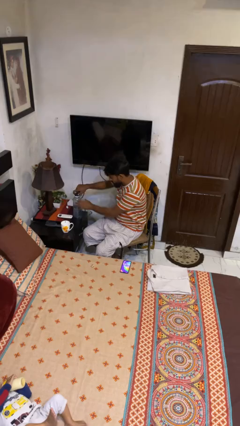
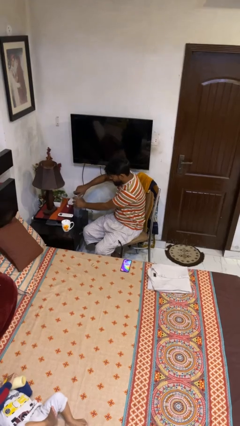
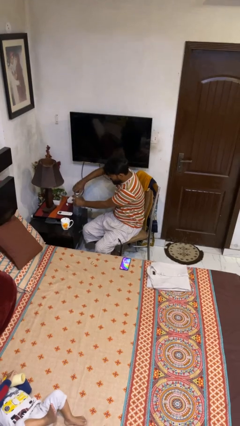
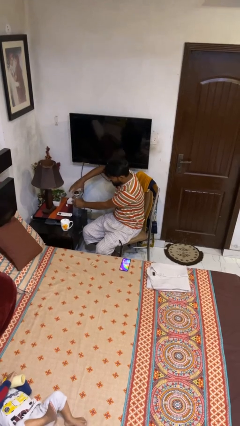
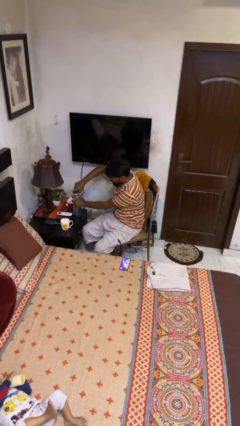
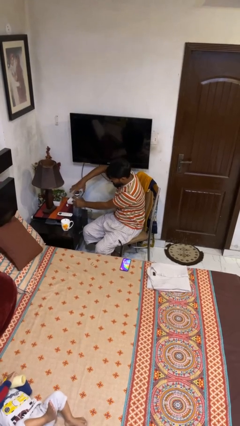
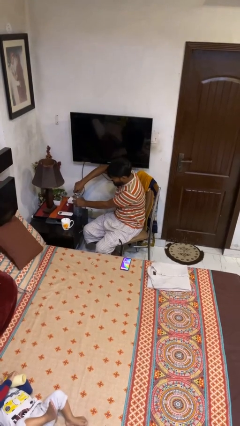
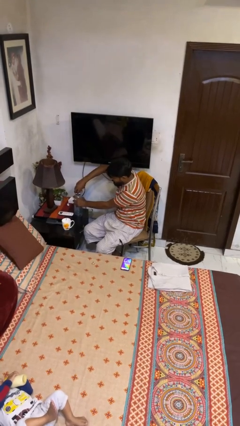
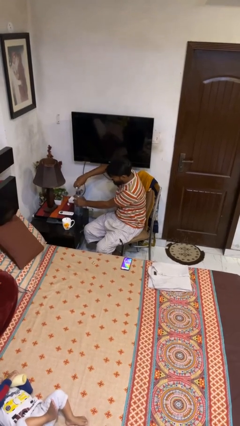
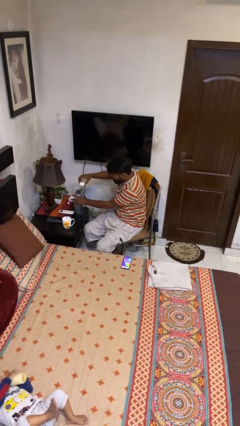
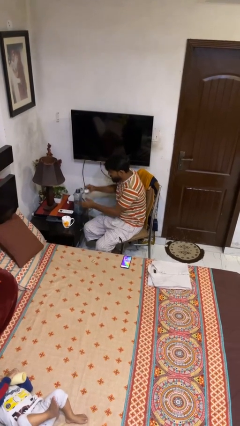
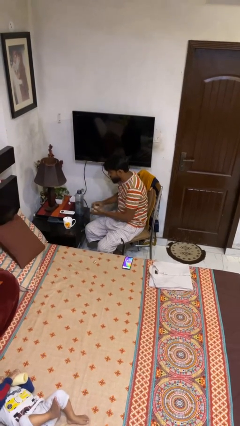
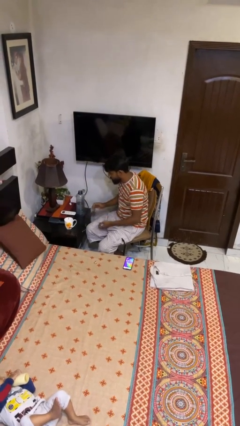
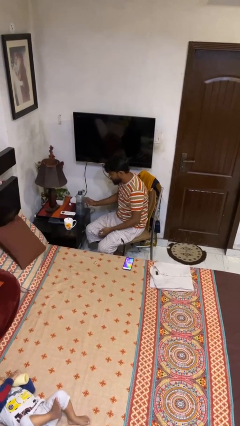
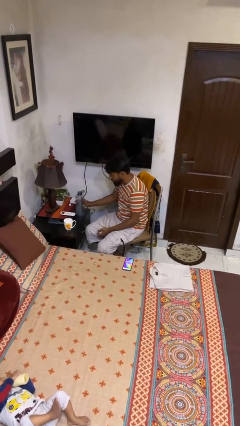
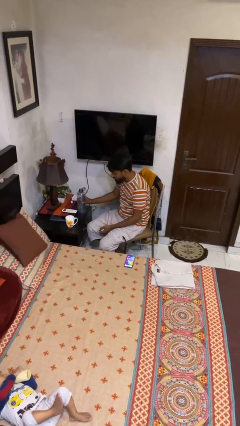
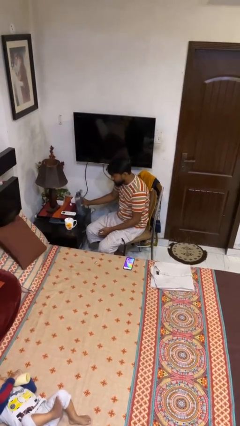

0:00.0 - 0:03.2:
person unscrews lid from bottle

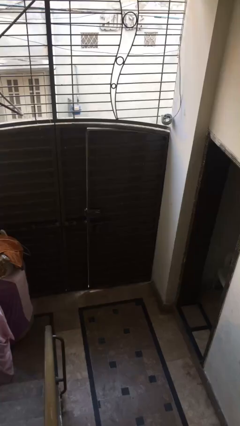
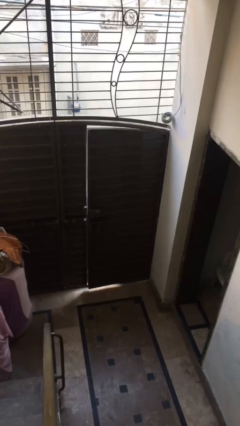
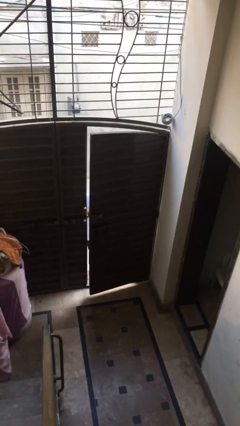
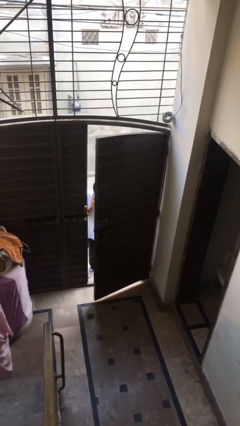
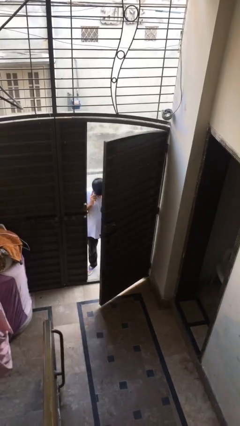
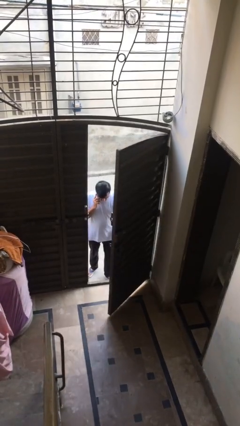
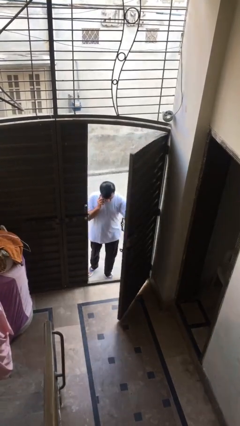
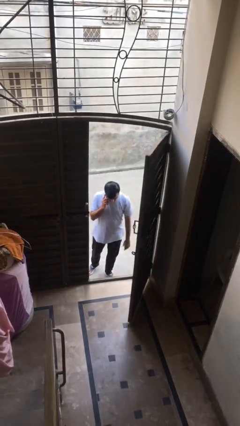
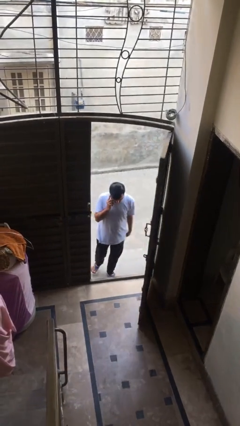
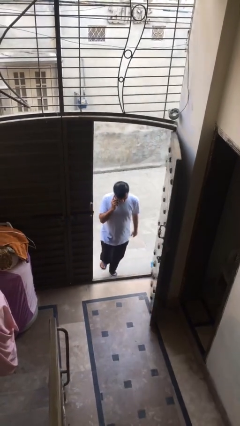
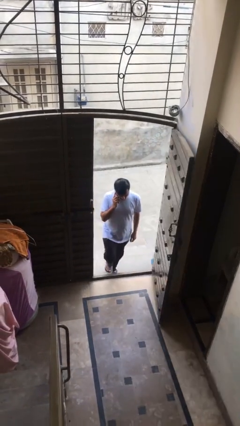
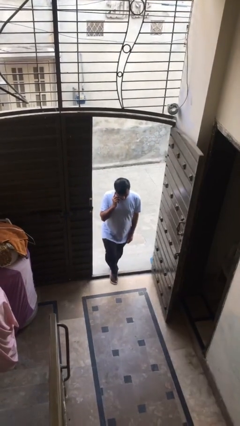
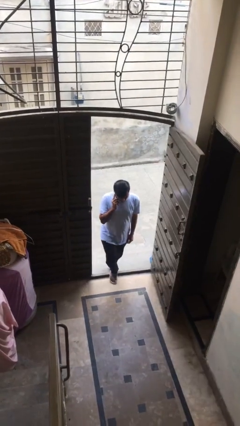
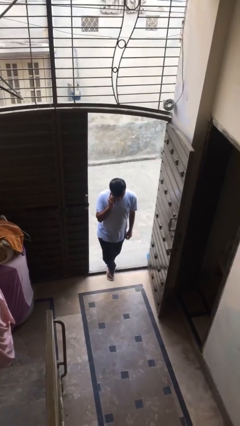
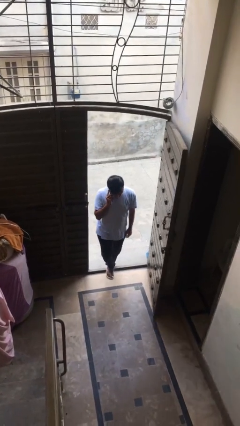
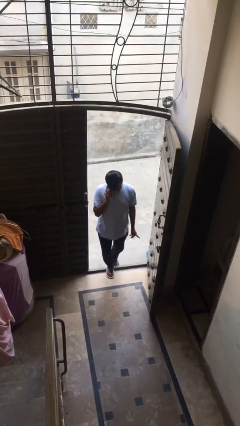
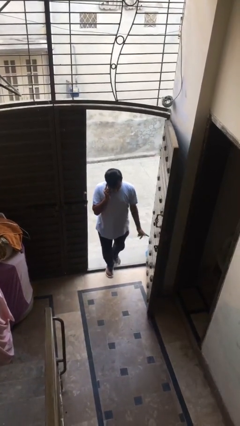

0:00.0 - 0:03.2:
person opens facility door

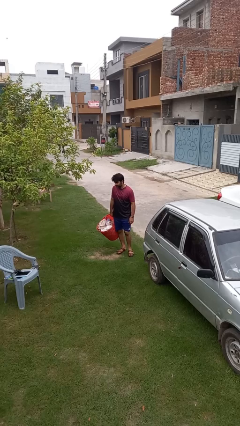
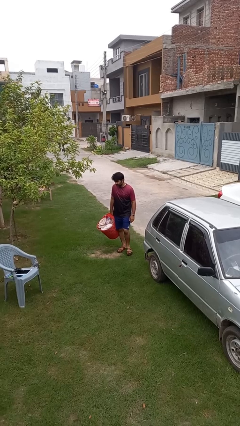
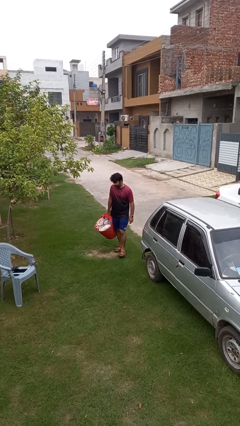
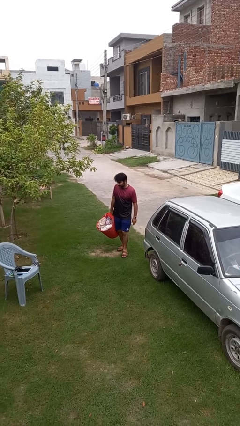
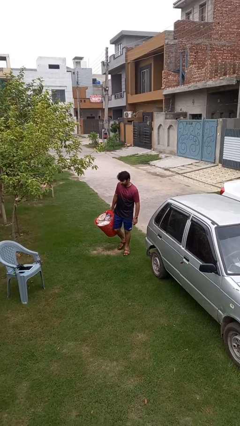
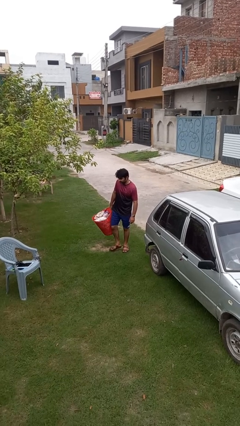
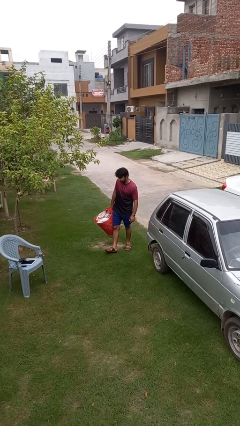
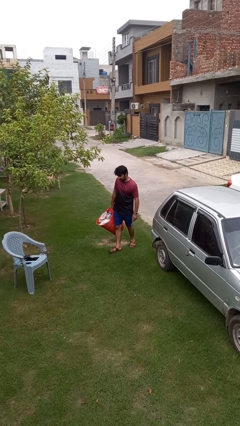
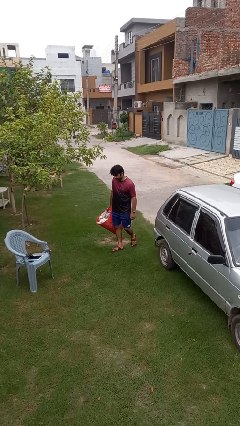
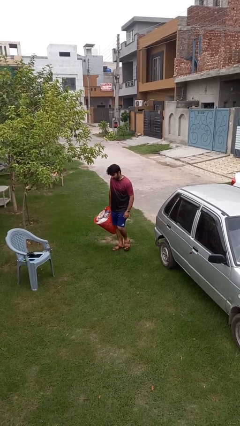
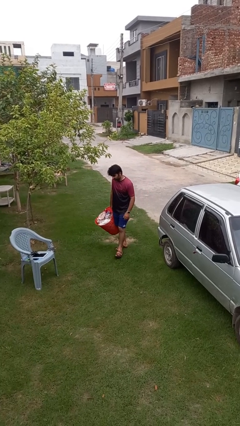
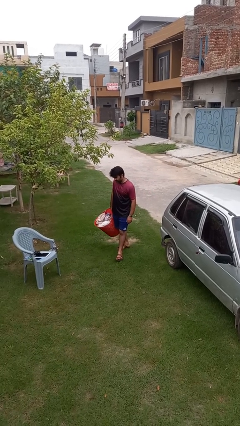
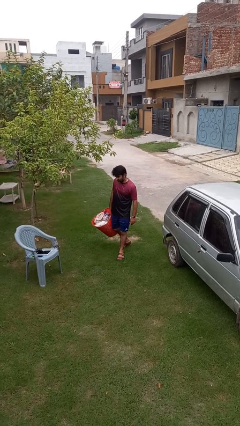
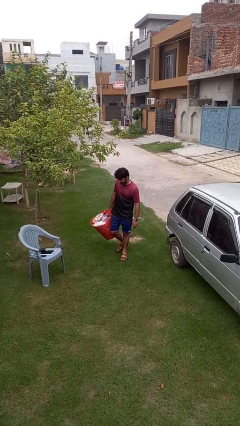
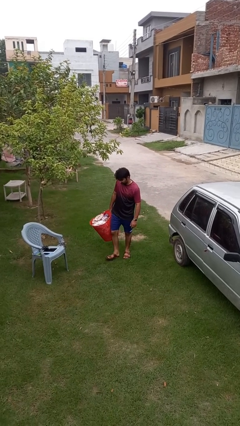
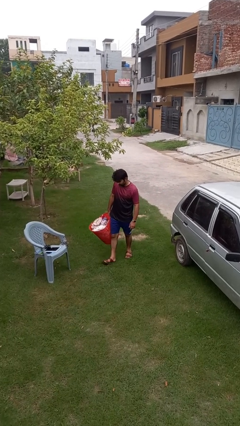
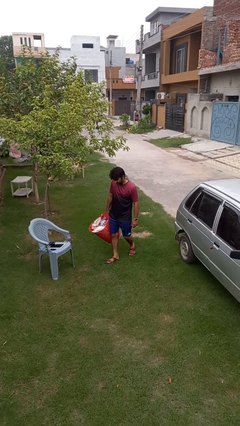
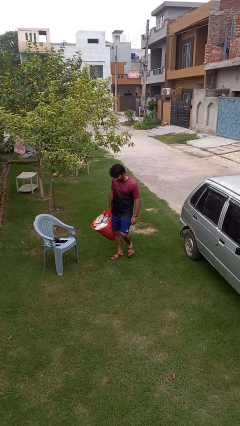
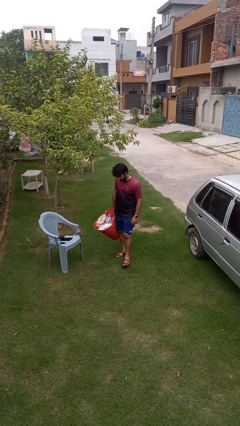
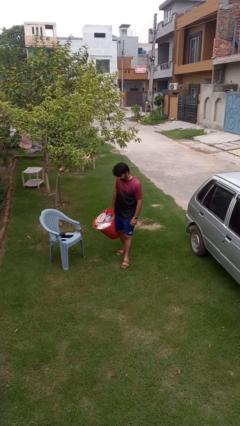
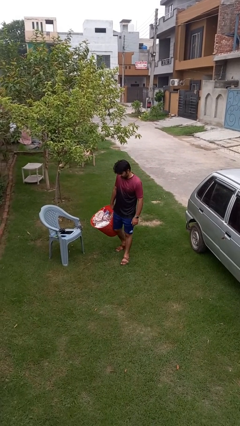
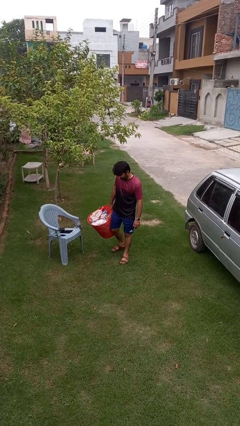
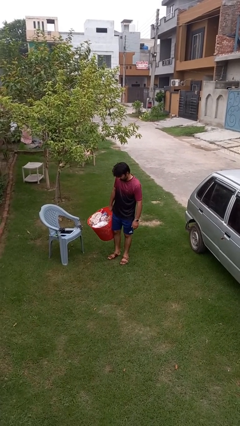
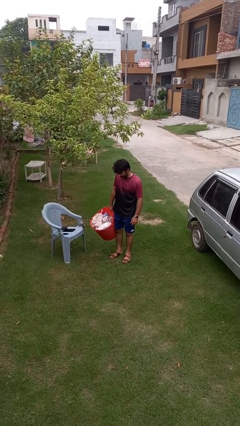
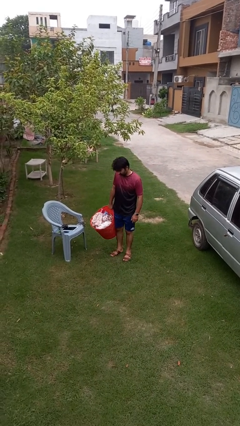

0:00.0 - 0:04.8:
person carries laundry basket

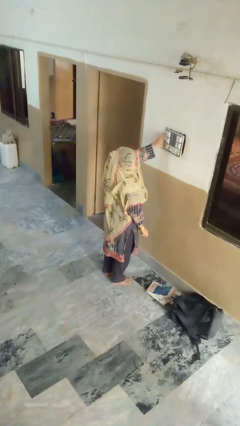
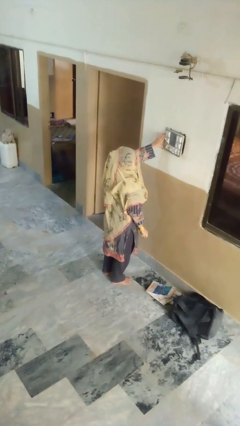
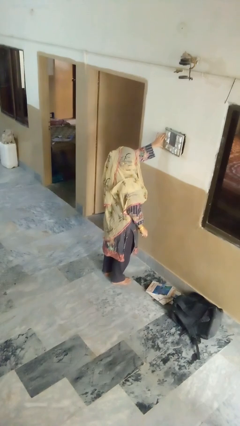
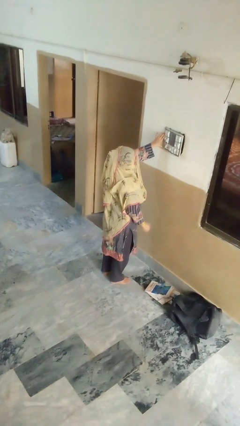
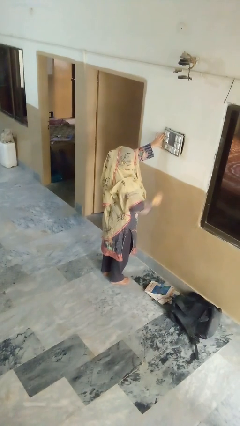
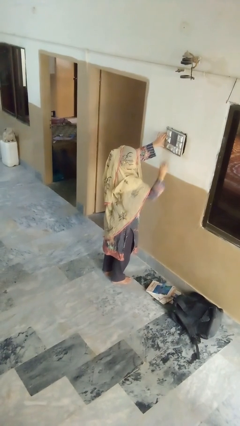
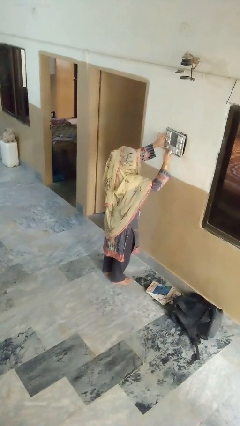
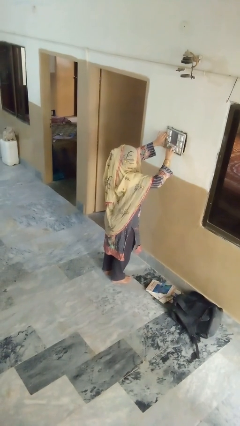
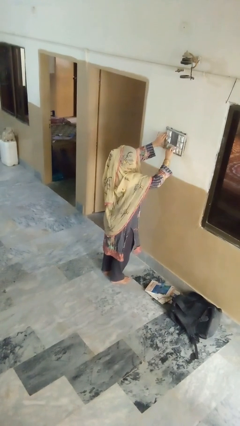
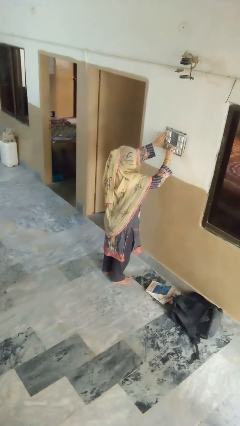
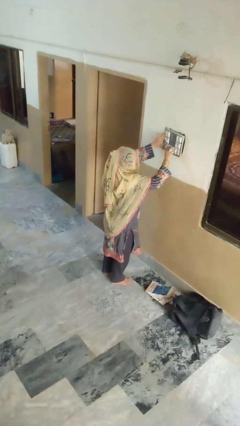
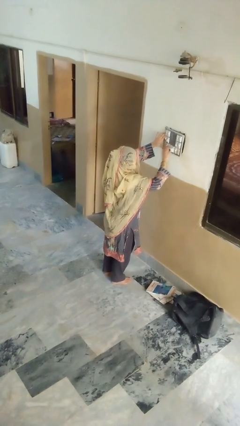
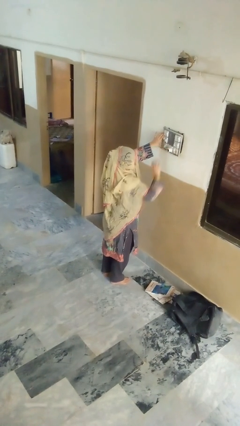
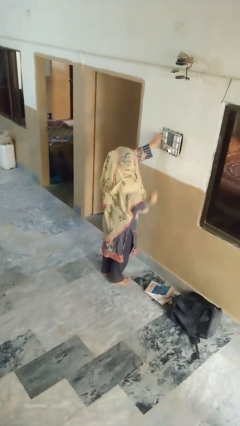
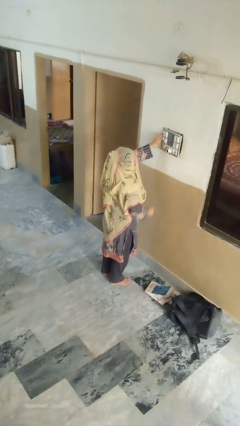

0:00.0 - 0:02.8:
person plugs into electrical socket

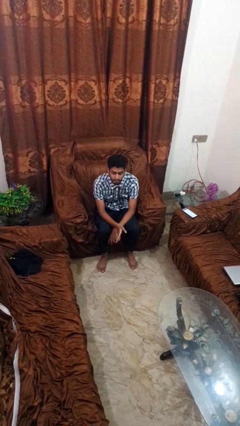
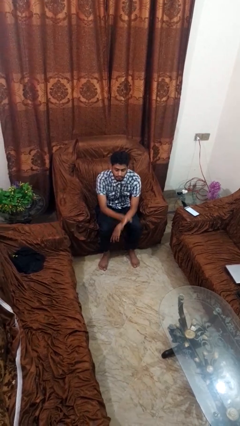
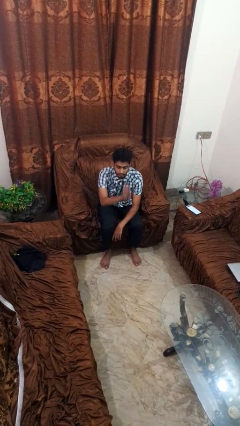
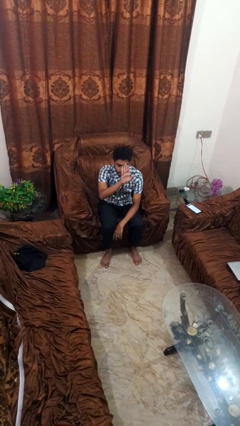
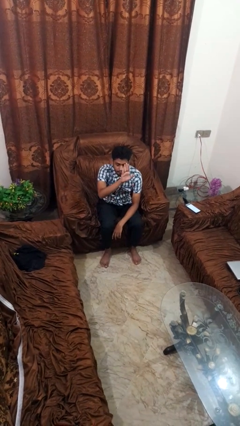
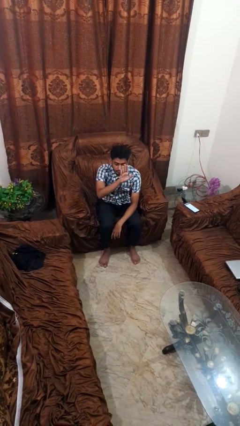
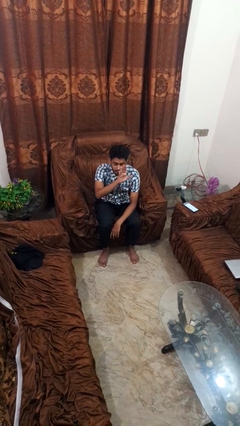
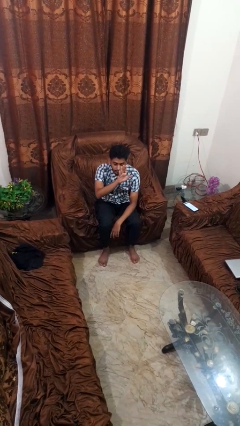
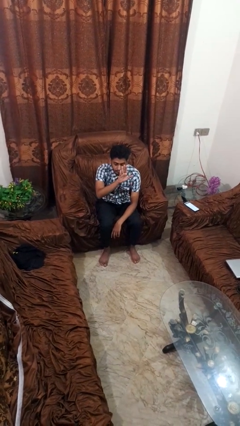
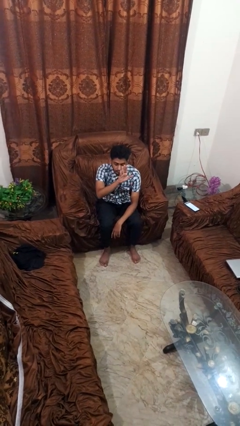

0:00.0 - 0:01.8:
person gestures swipe up

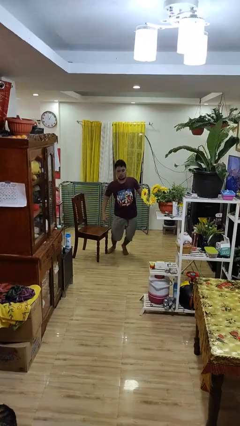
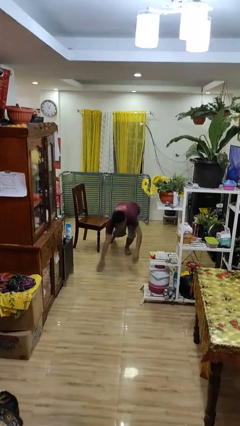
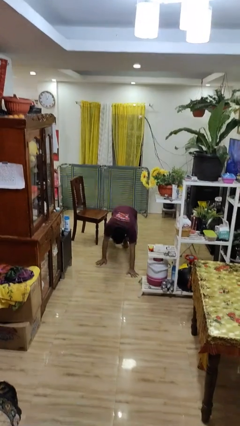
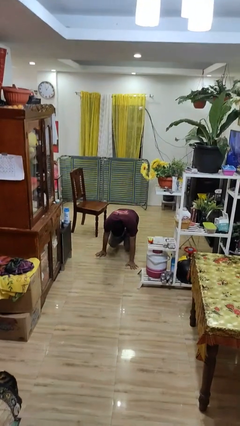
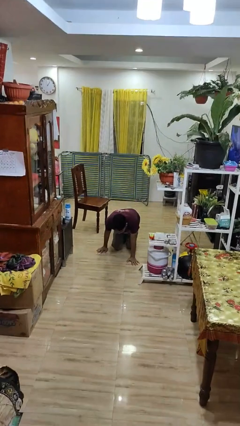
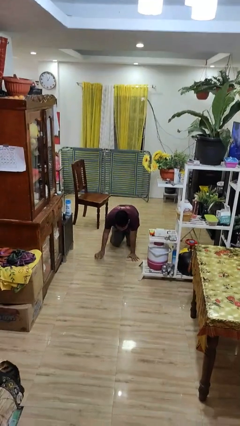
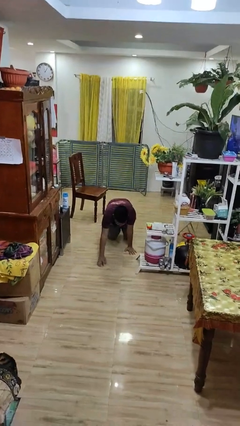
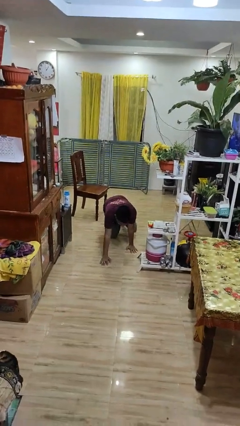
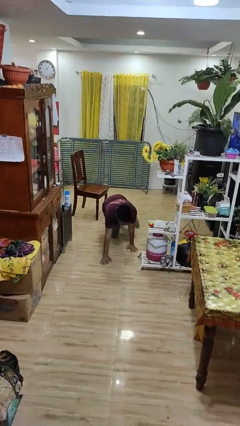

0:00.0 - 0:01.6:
person trips on object on floor
